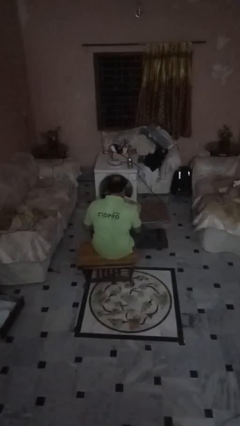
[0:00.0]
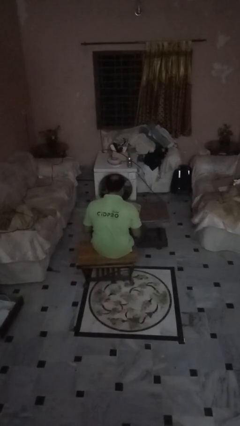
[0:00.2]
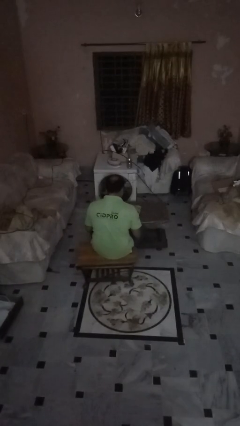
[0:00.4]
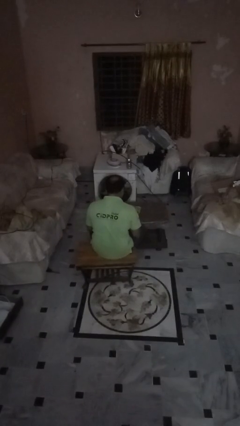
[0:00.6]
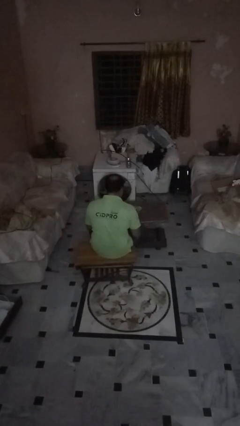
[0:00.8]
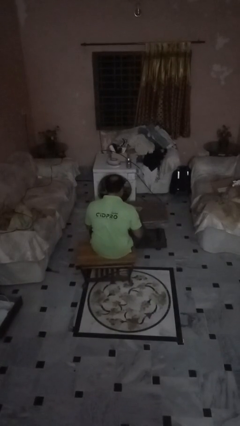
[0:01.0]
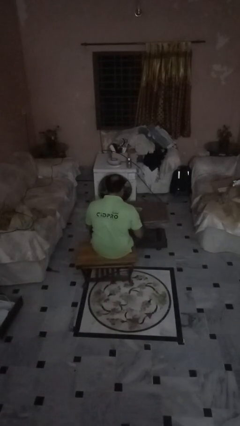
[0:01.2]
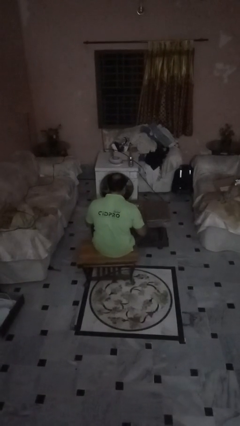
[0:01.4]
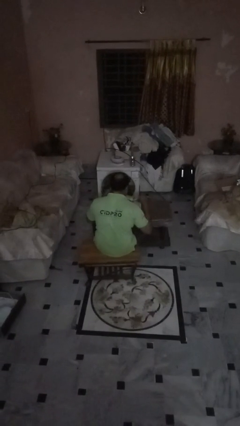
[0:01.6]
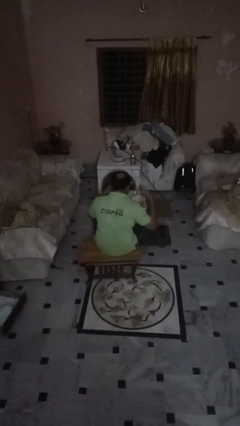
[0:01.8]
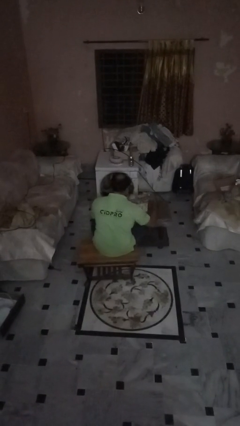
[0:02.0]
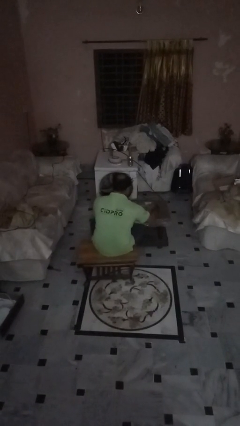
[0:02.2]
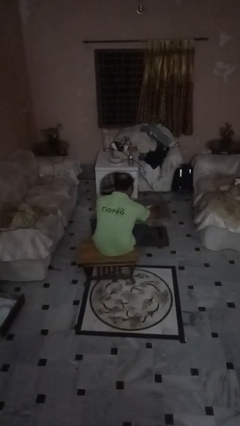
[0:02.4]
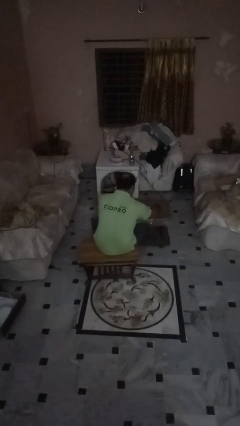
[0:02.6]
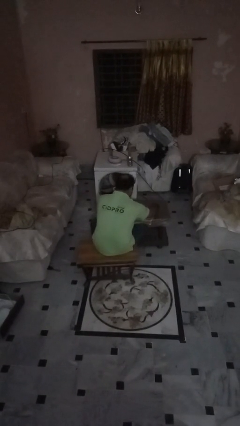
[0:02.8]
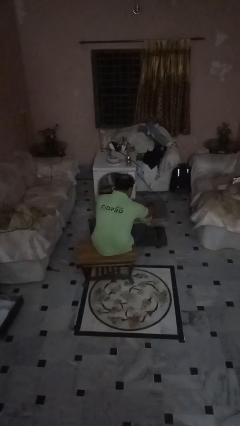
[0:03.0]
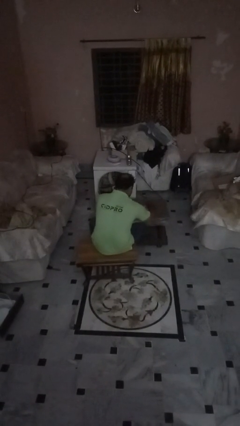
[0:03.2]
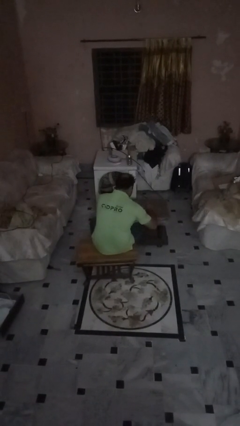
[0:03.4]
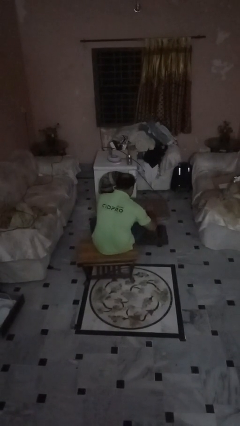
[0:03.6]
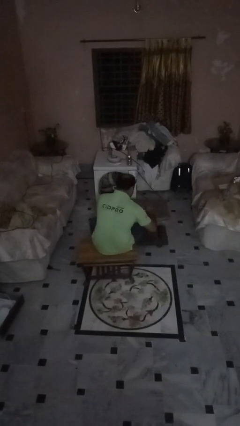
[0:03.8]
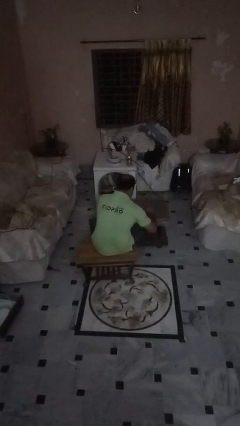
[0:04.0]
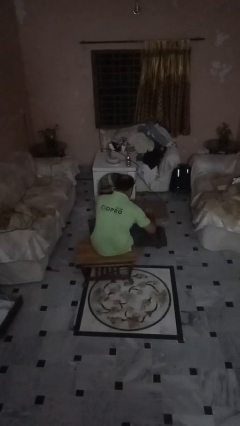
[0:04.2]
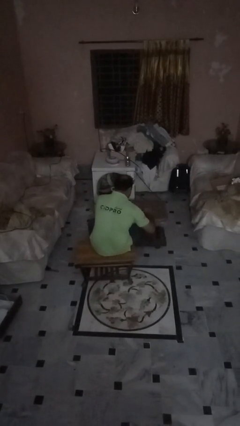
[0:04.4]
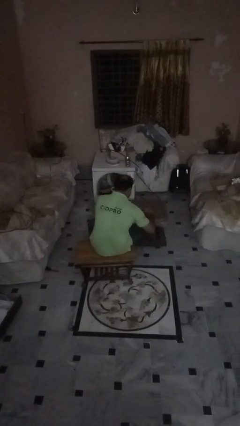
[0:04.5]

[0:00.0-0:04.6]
person tears paper

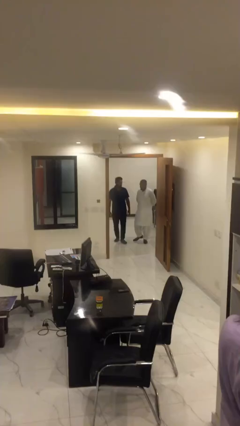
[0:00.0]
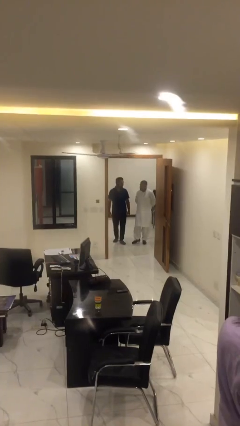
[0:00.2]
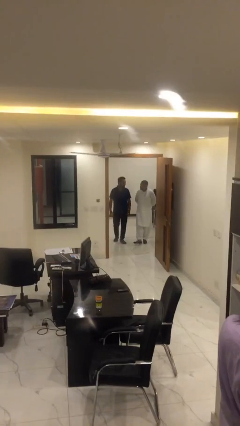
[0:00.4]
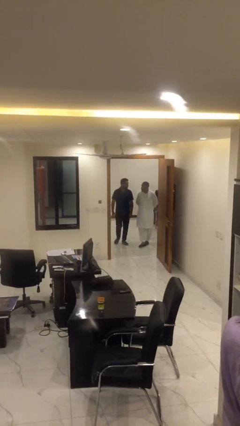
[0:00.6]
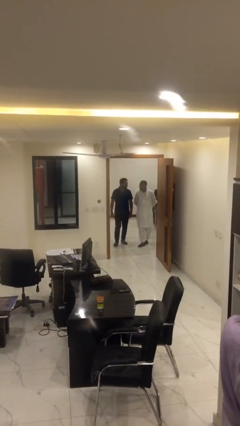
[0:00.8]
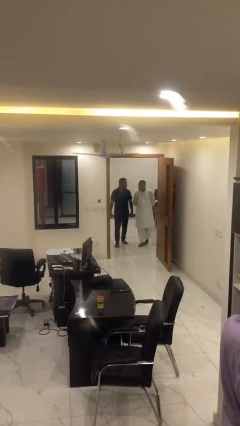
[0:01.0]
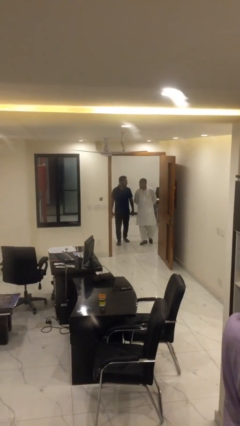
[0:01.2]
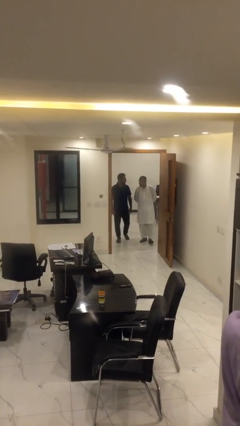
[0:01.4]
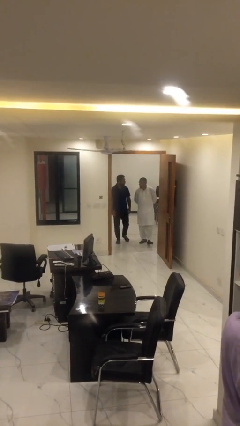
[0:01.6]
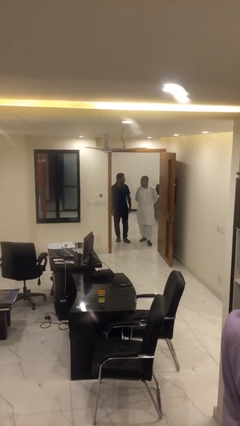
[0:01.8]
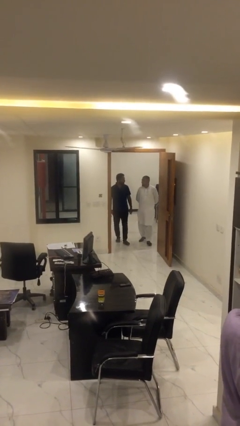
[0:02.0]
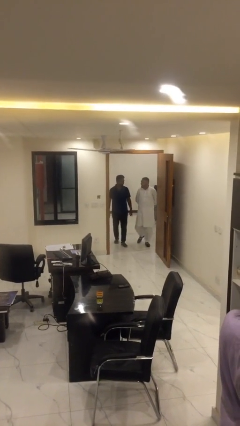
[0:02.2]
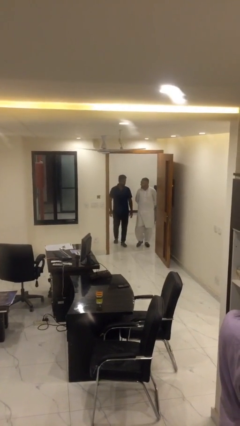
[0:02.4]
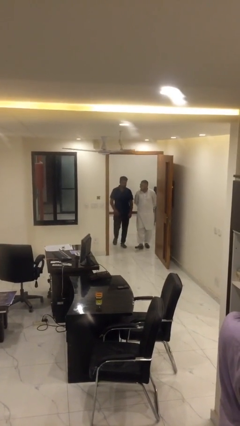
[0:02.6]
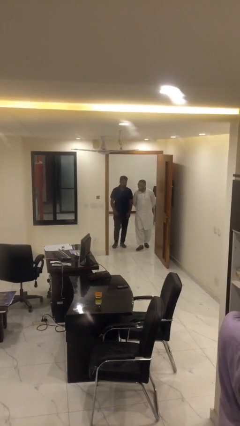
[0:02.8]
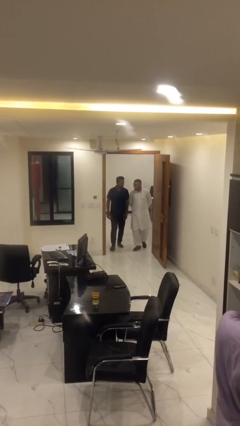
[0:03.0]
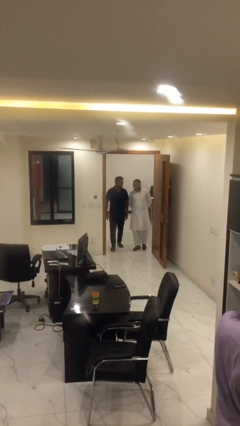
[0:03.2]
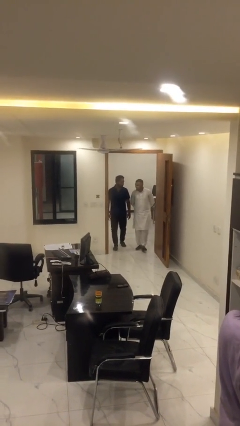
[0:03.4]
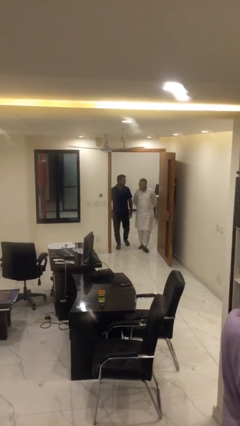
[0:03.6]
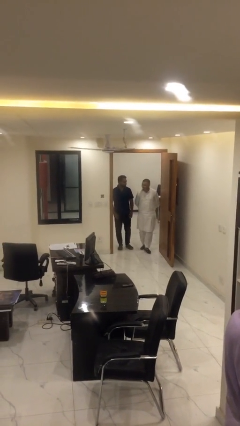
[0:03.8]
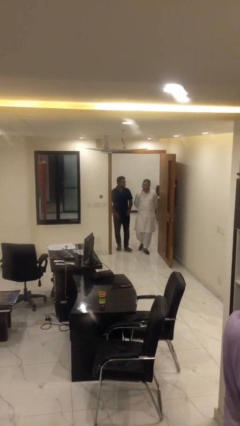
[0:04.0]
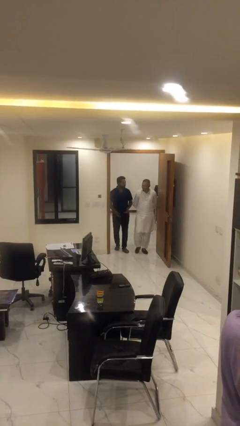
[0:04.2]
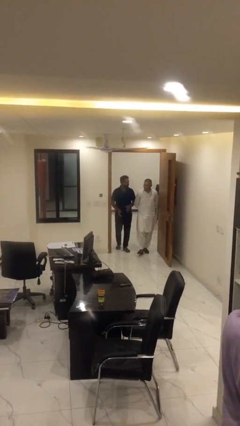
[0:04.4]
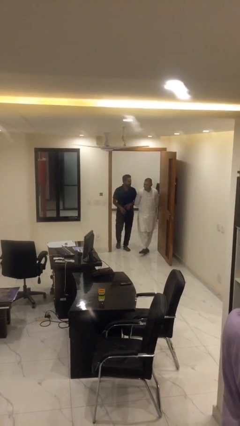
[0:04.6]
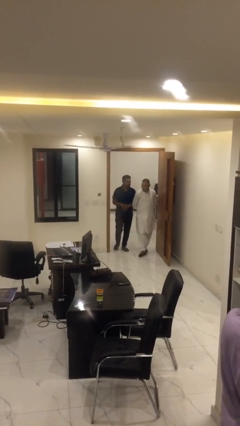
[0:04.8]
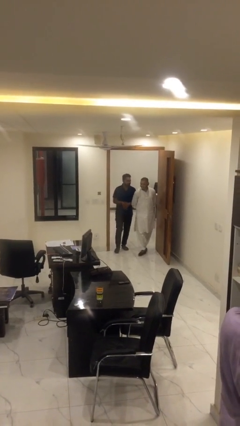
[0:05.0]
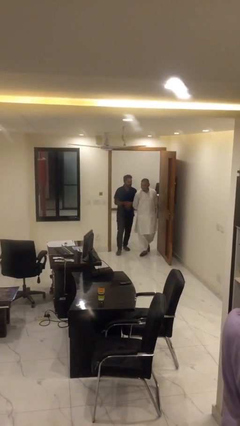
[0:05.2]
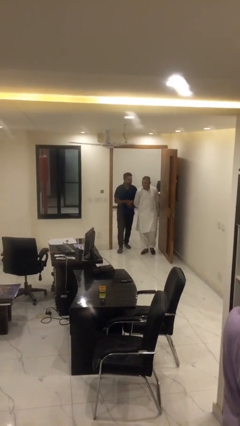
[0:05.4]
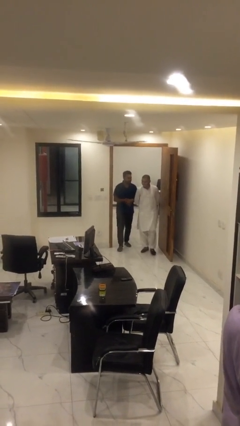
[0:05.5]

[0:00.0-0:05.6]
person talks to person

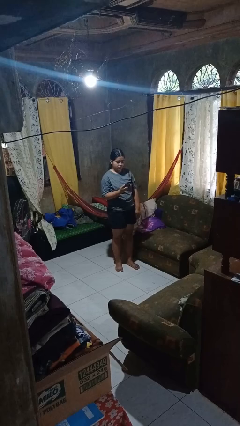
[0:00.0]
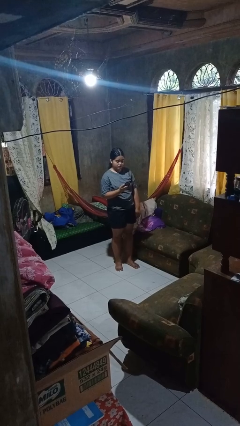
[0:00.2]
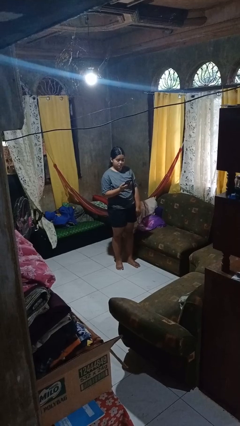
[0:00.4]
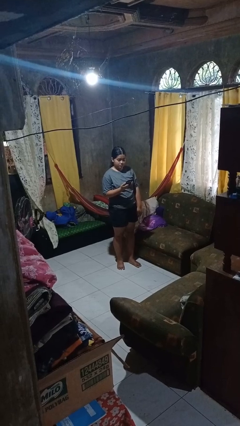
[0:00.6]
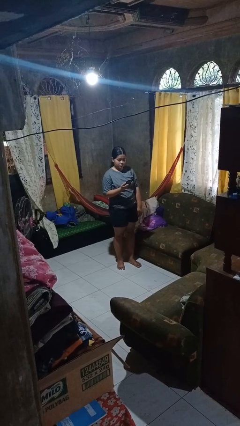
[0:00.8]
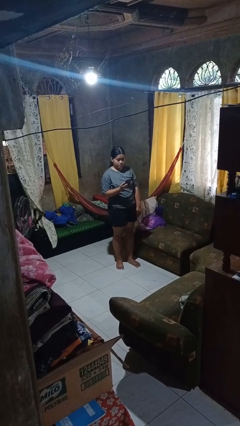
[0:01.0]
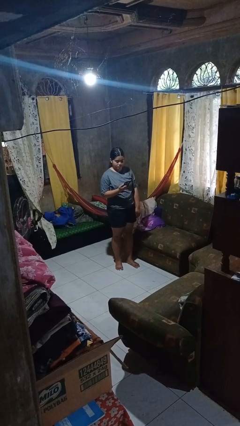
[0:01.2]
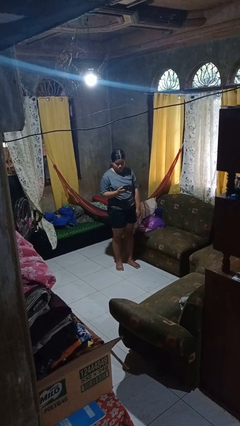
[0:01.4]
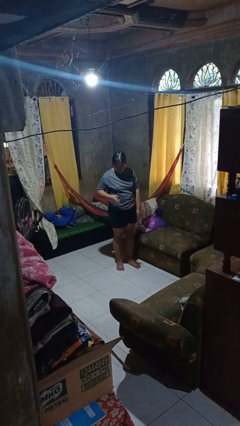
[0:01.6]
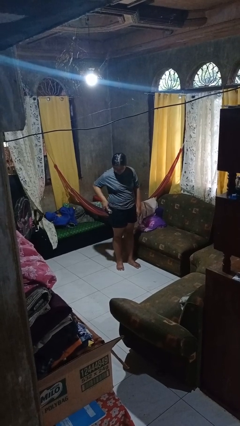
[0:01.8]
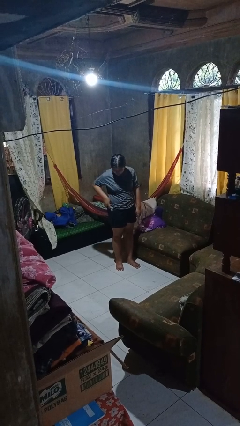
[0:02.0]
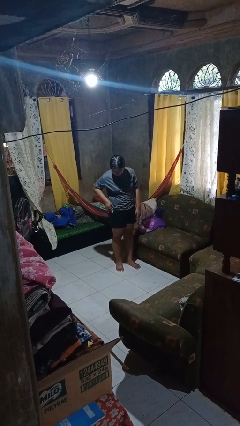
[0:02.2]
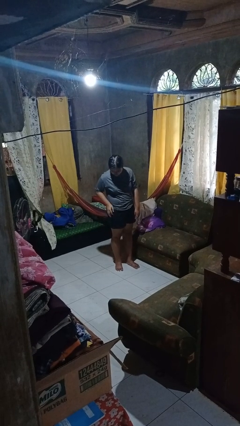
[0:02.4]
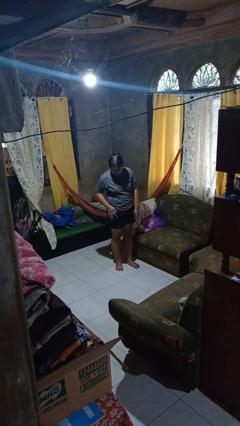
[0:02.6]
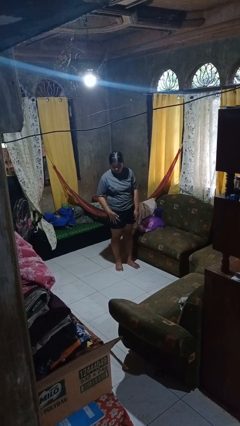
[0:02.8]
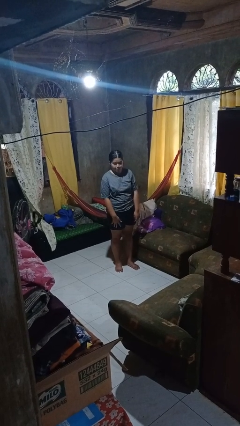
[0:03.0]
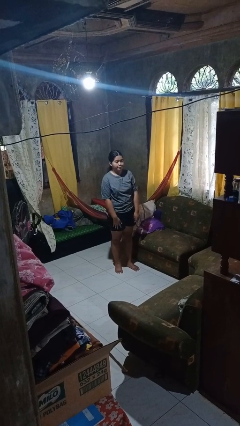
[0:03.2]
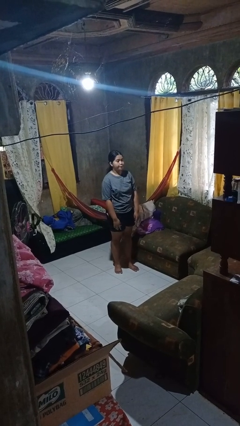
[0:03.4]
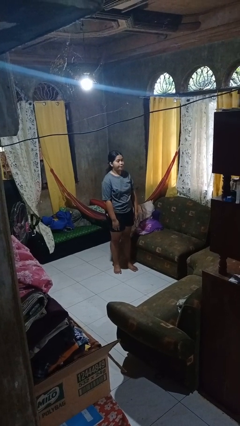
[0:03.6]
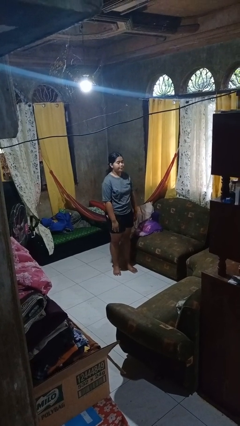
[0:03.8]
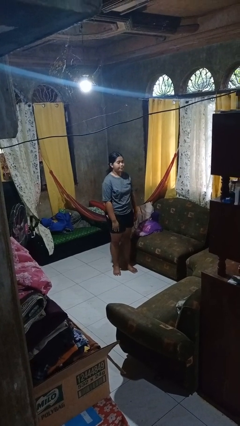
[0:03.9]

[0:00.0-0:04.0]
person puts phone into pocket

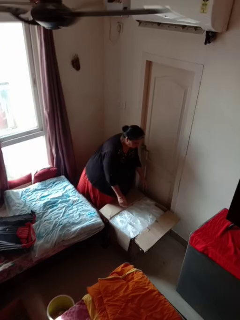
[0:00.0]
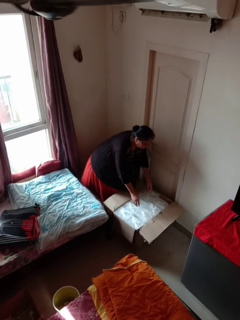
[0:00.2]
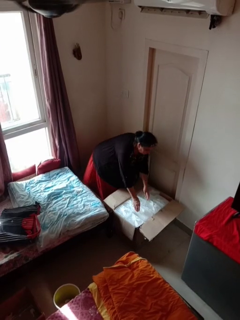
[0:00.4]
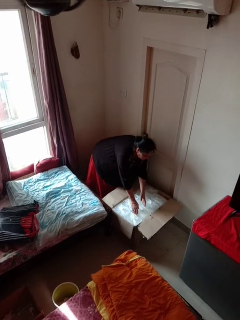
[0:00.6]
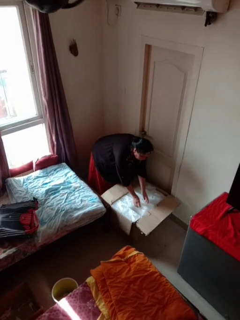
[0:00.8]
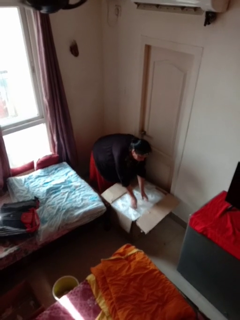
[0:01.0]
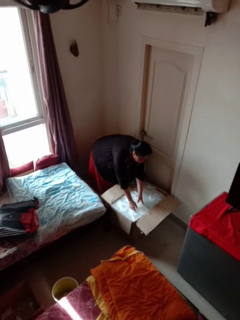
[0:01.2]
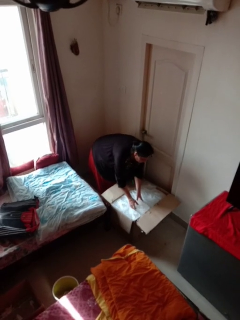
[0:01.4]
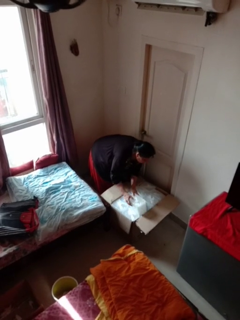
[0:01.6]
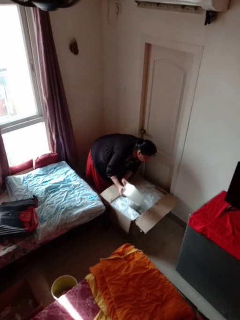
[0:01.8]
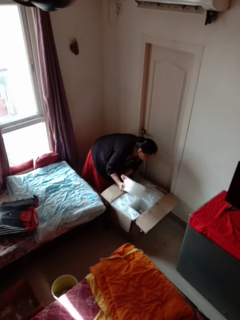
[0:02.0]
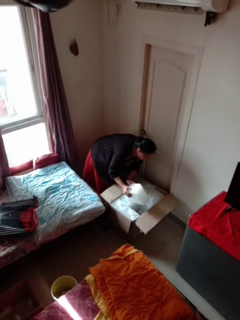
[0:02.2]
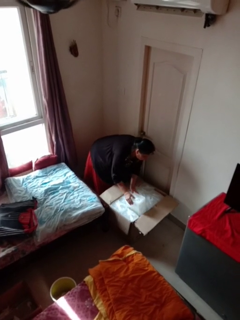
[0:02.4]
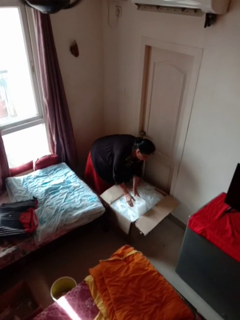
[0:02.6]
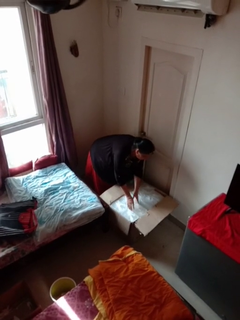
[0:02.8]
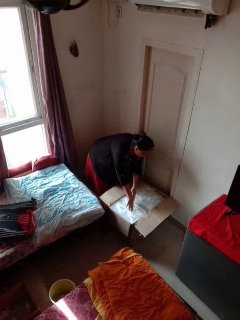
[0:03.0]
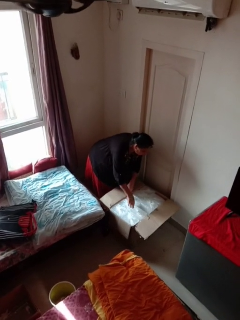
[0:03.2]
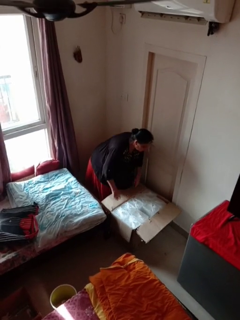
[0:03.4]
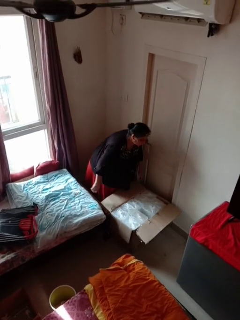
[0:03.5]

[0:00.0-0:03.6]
person searches in box

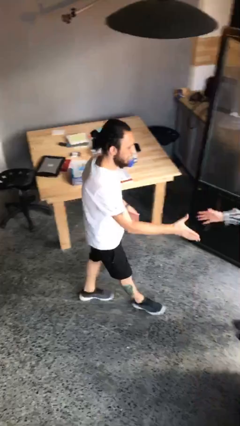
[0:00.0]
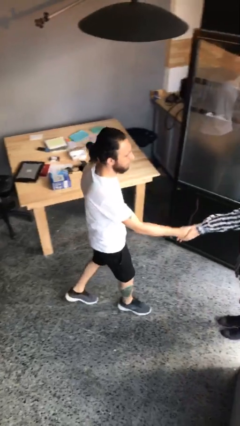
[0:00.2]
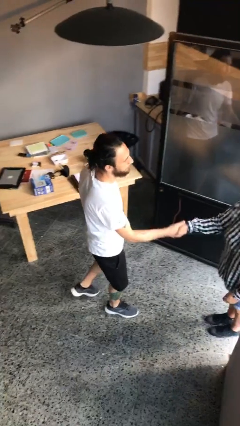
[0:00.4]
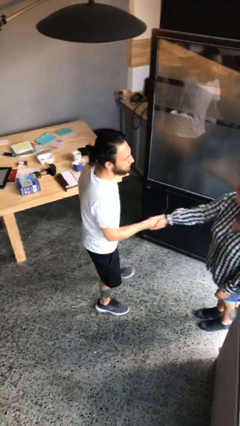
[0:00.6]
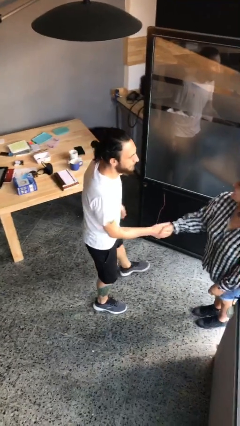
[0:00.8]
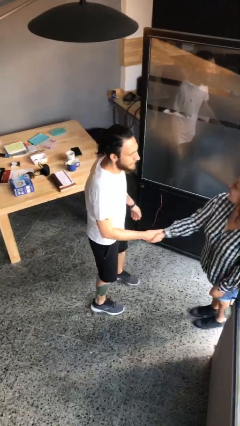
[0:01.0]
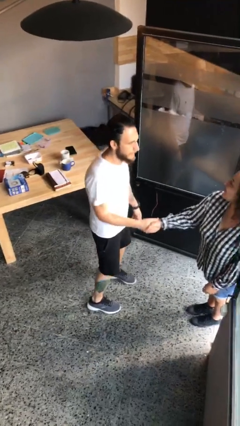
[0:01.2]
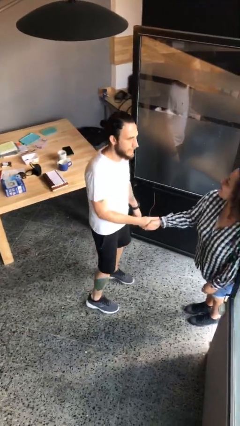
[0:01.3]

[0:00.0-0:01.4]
person shakes hand
